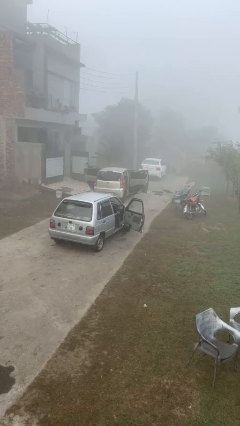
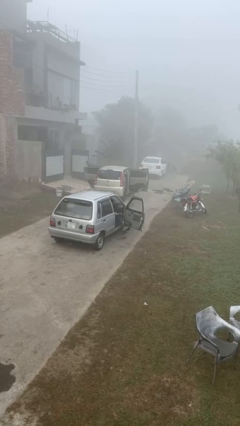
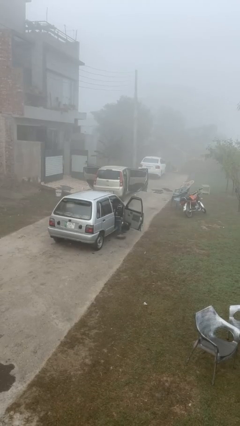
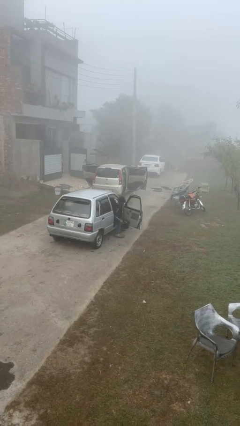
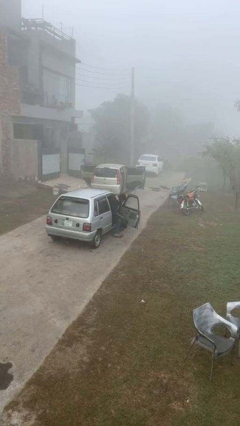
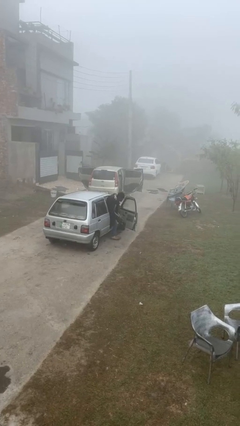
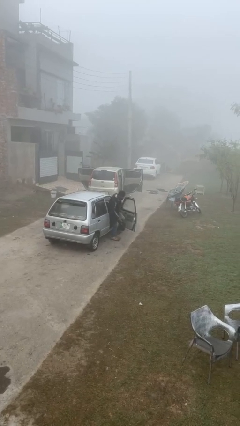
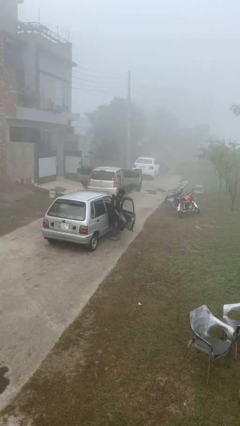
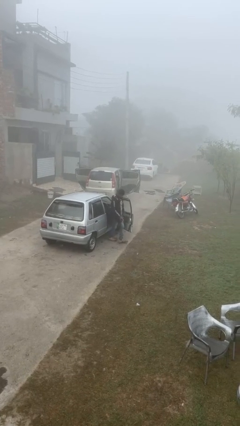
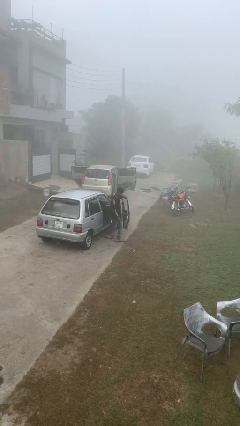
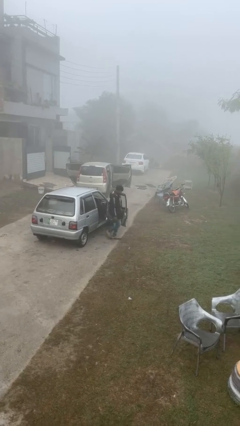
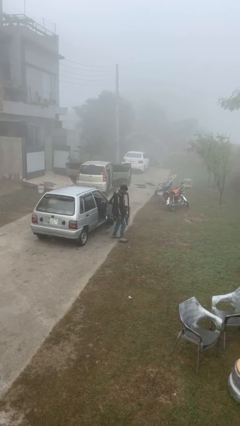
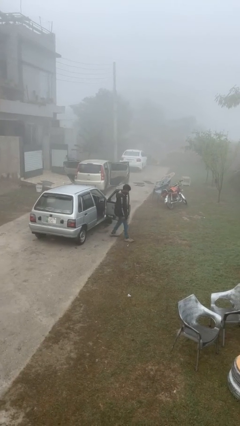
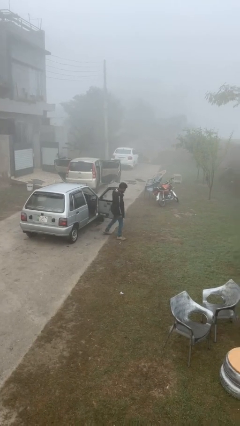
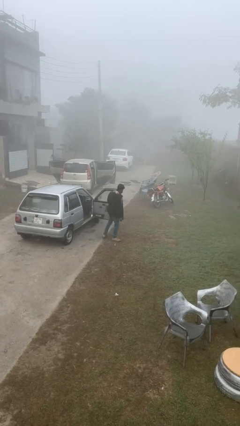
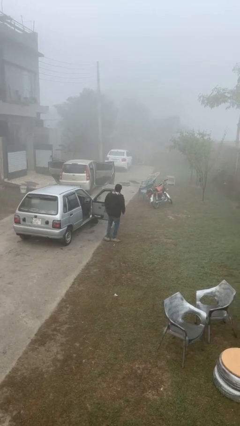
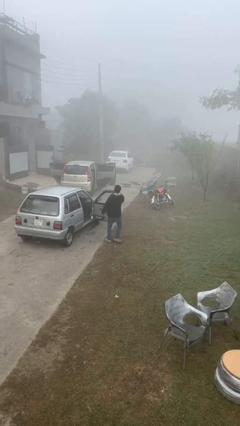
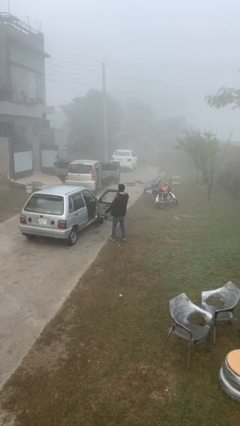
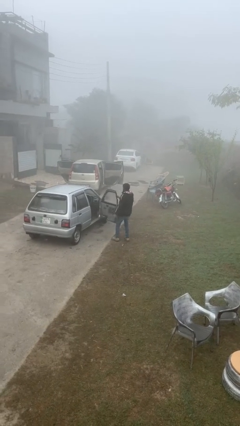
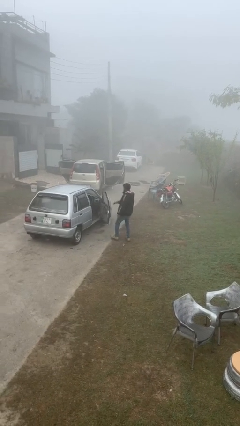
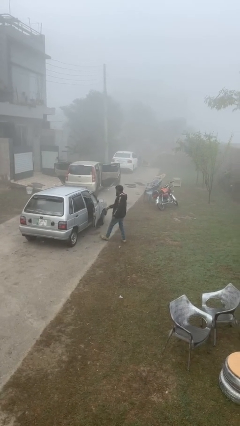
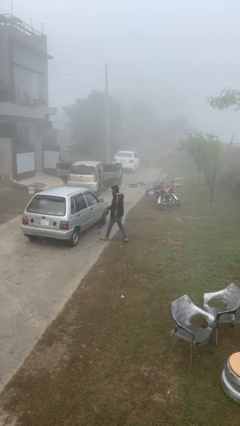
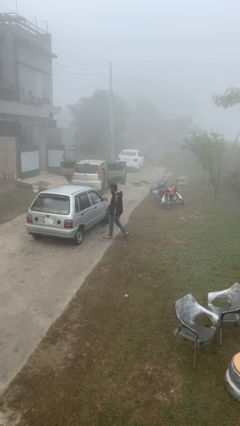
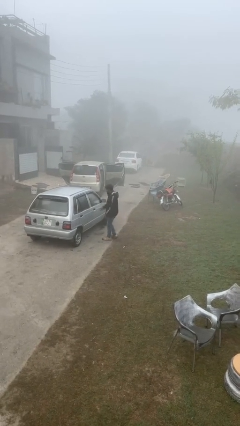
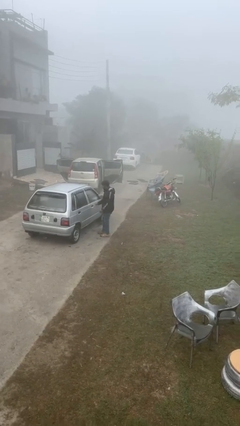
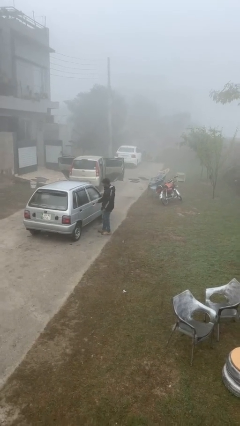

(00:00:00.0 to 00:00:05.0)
person exits car

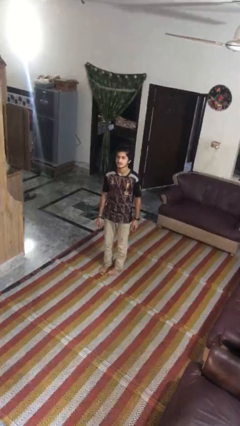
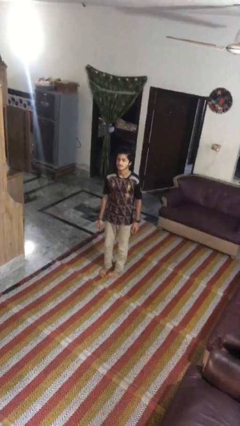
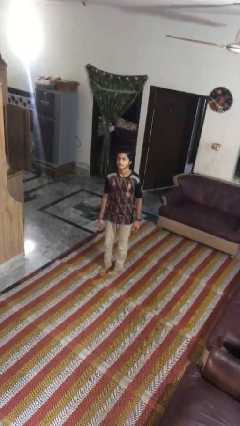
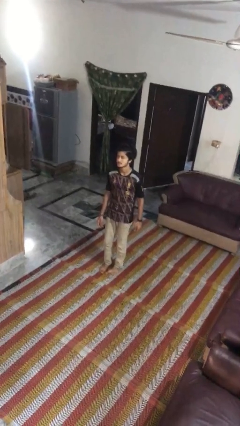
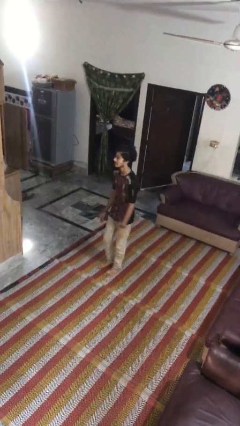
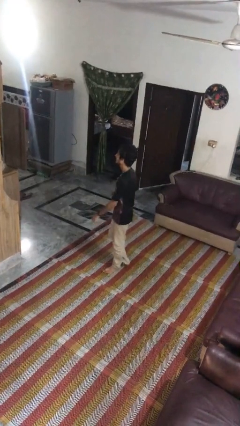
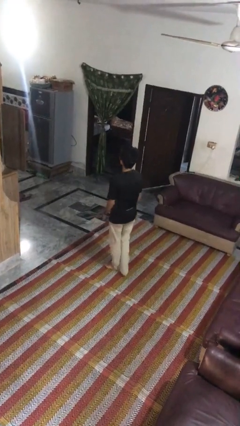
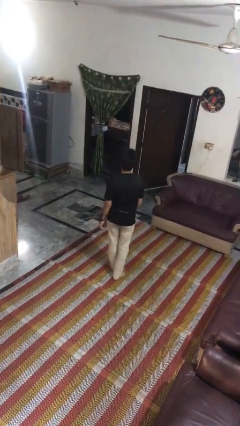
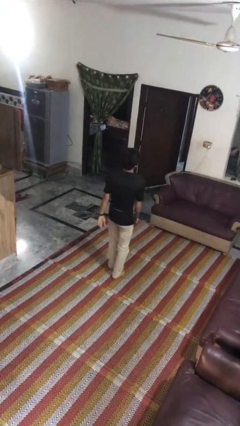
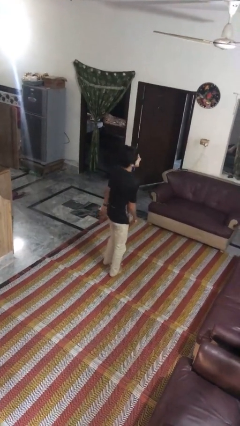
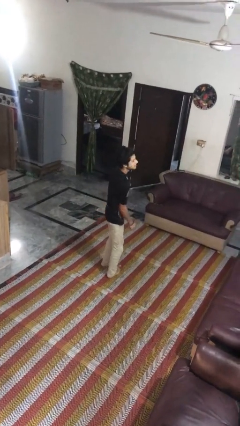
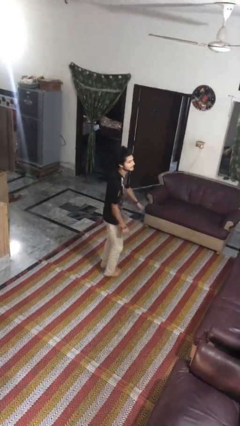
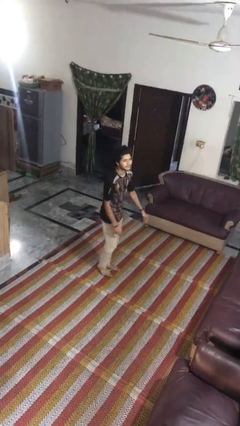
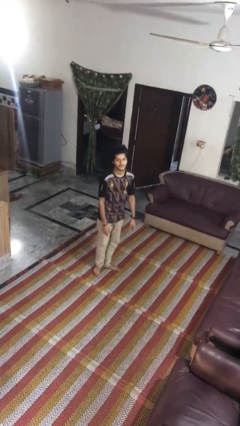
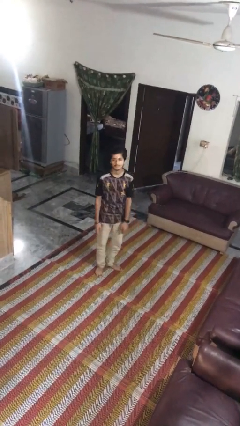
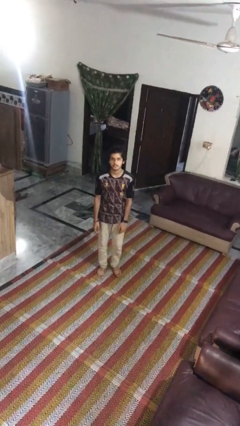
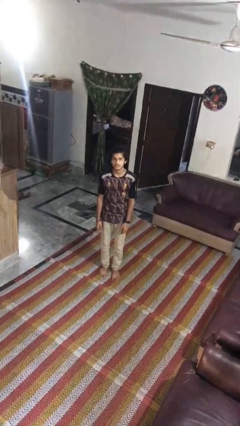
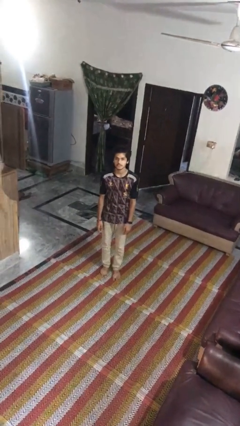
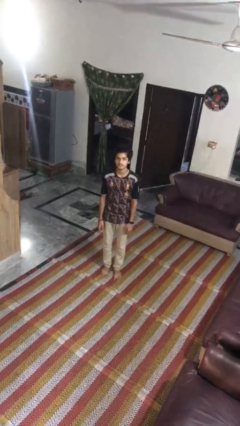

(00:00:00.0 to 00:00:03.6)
person twirls

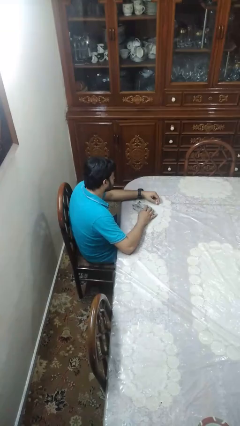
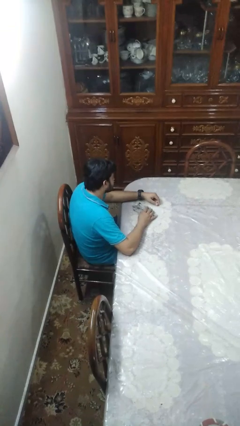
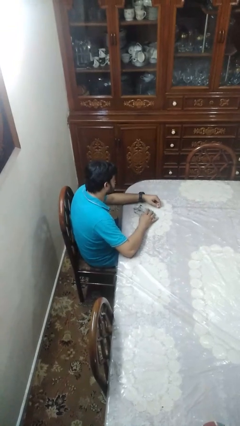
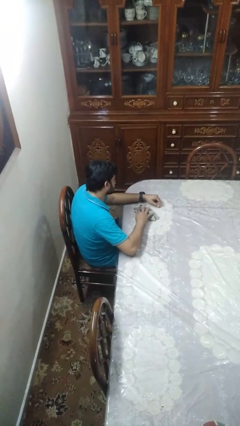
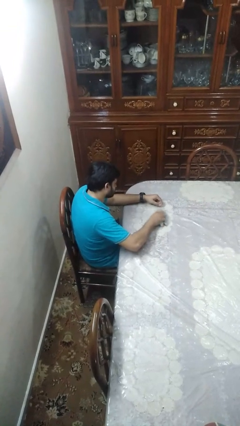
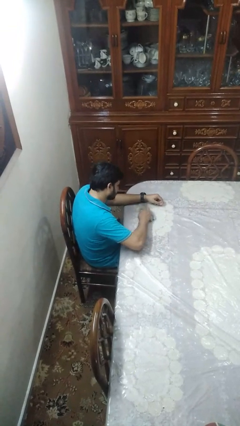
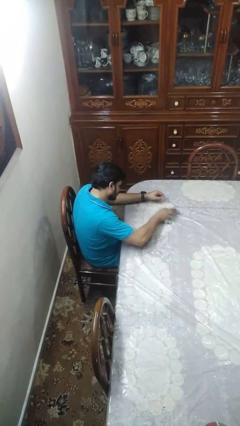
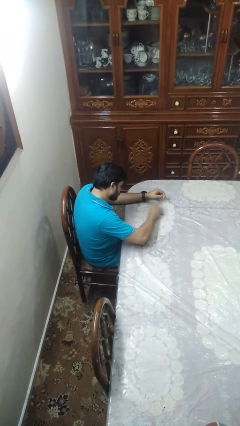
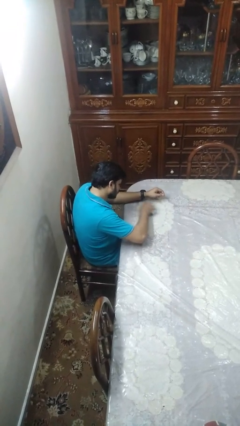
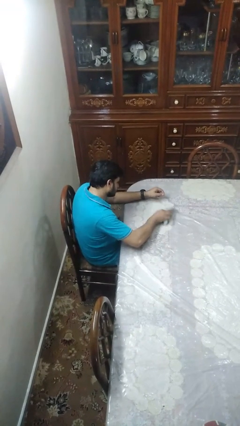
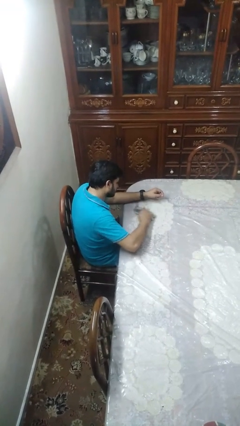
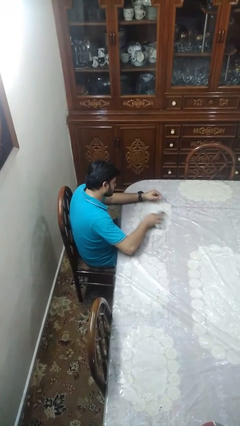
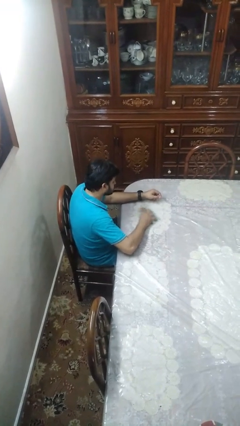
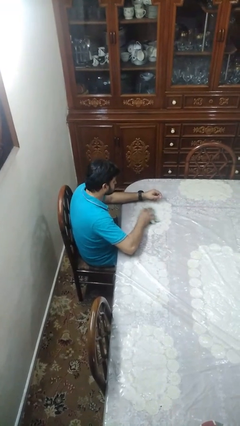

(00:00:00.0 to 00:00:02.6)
person cleans table with rag

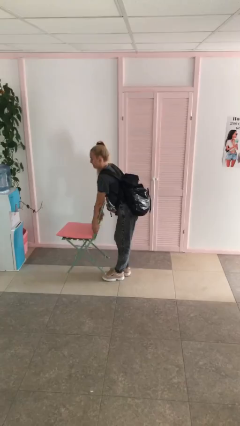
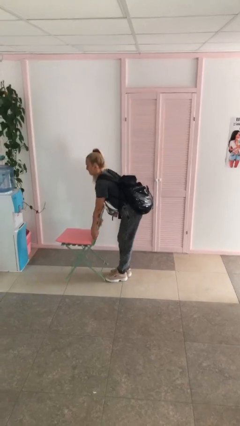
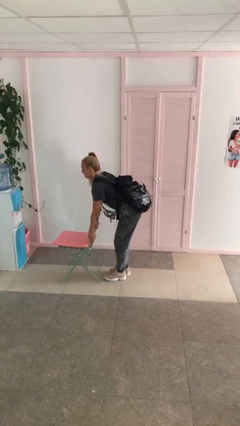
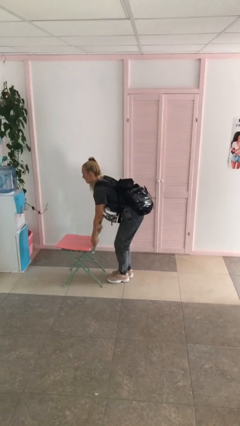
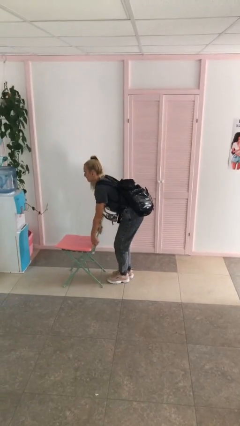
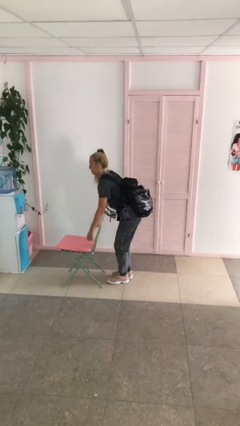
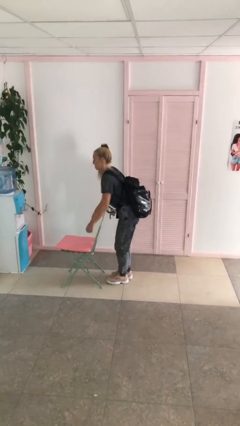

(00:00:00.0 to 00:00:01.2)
person puts down object on floor

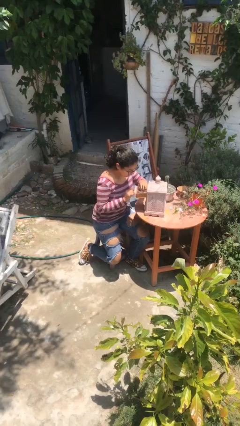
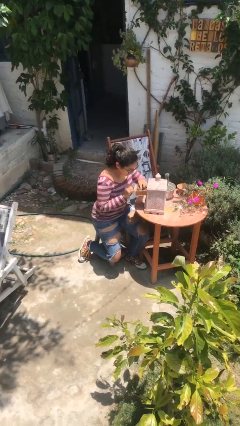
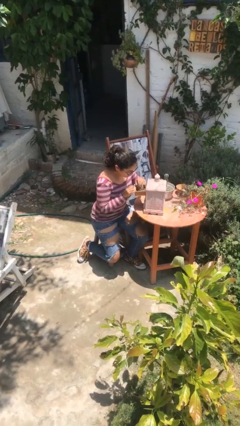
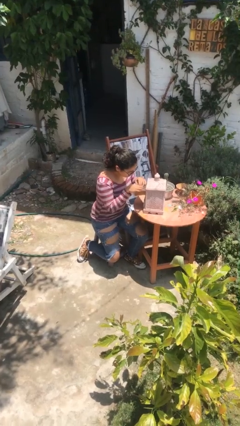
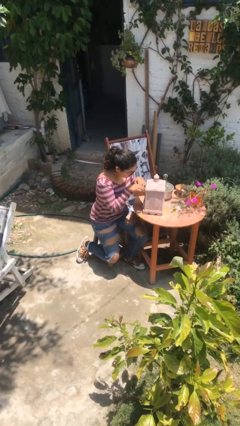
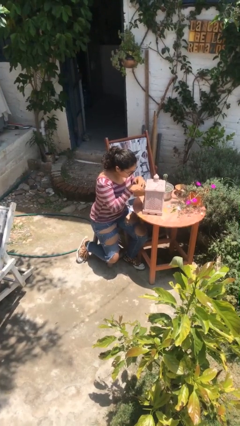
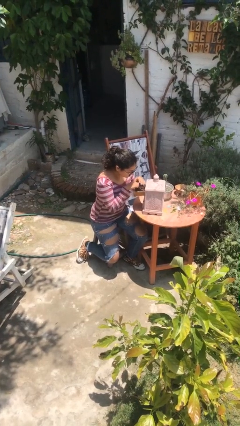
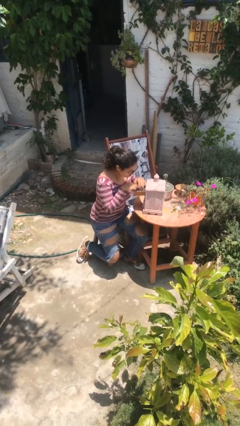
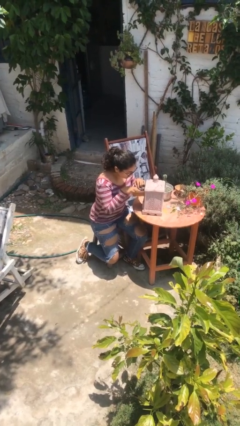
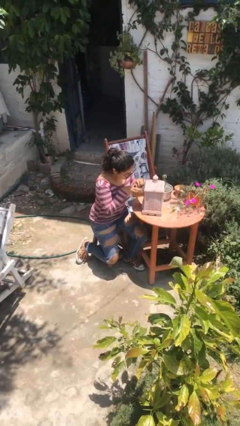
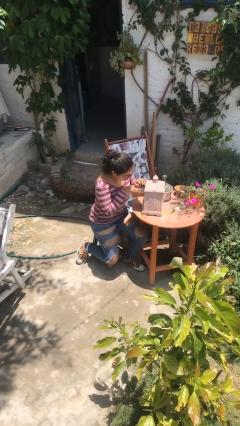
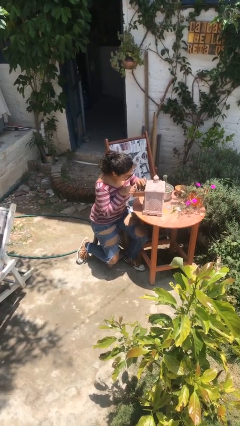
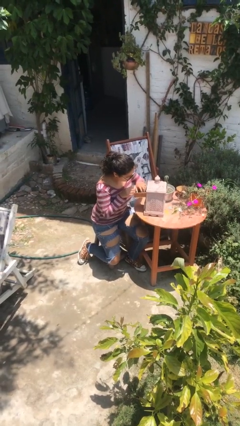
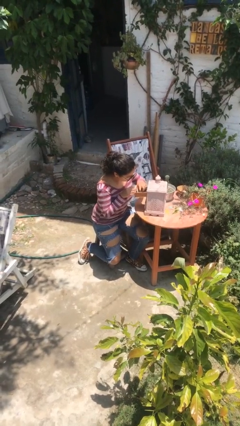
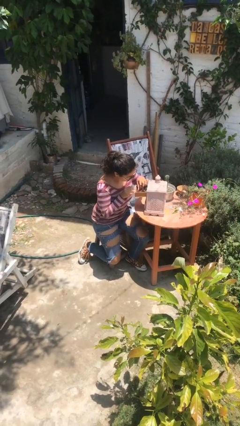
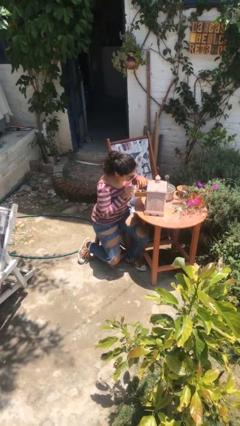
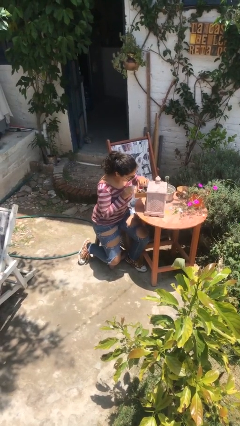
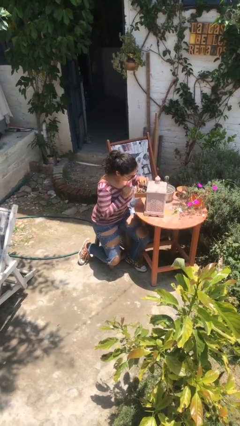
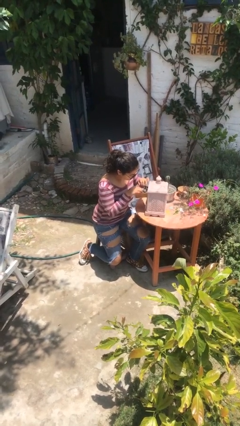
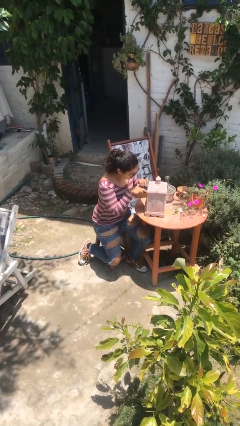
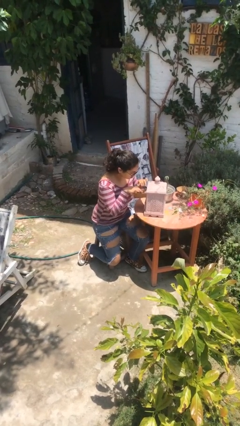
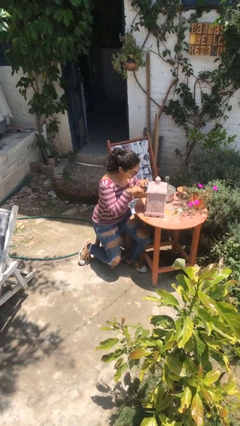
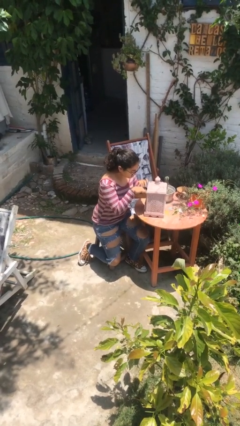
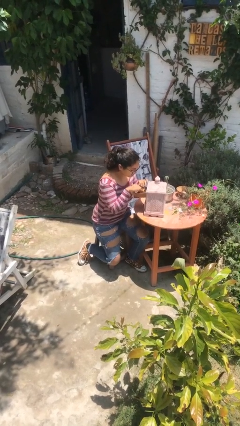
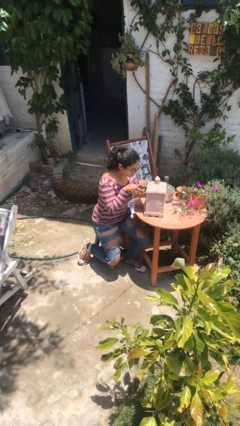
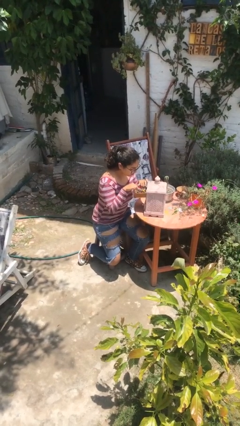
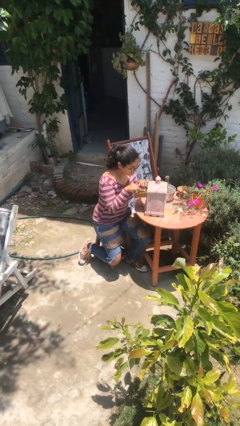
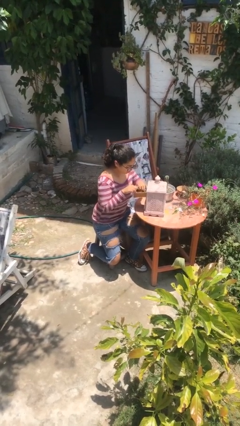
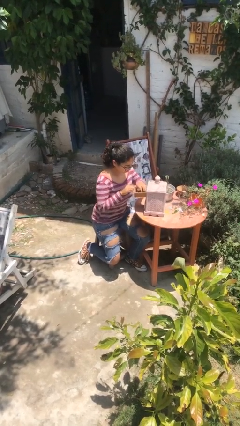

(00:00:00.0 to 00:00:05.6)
person searches jewelry box
